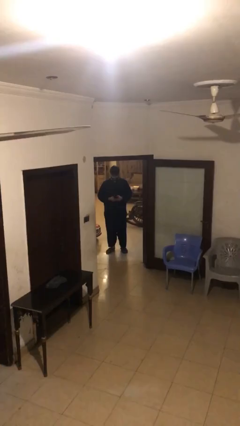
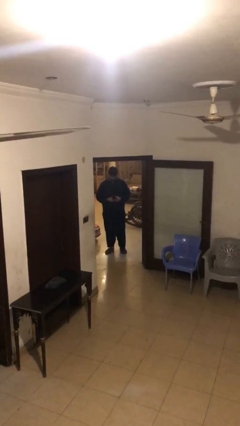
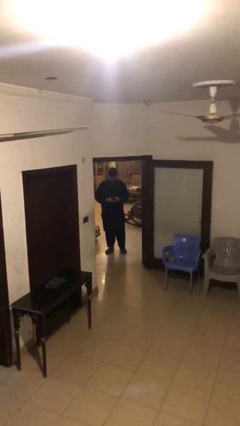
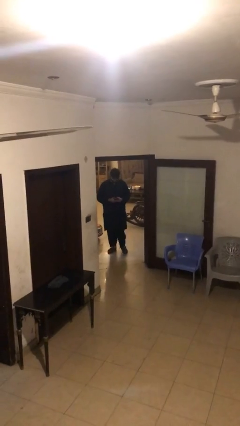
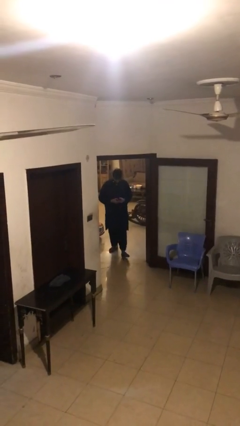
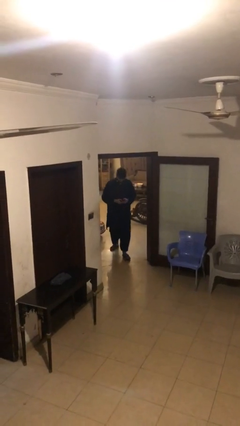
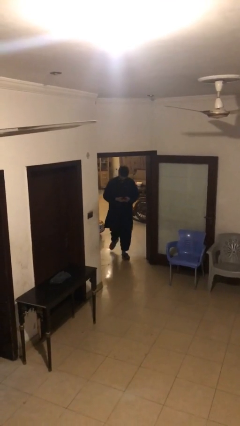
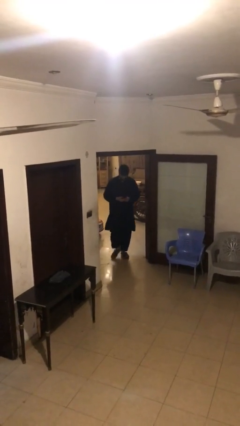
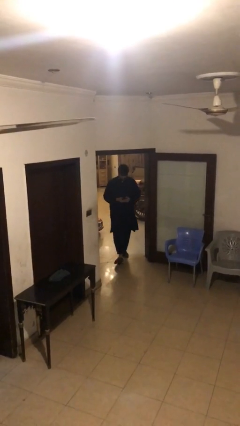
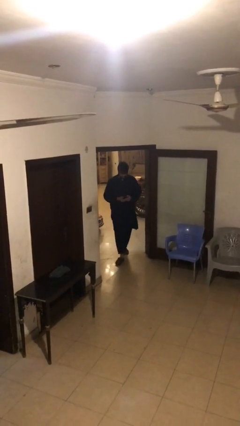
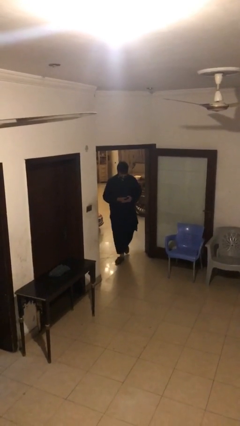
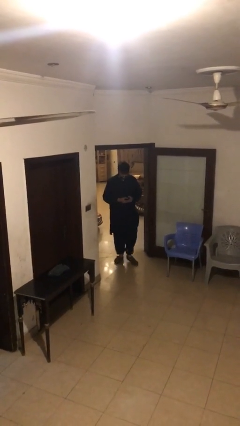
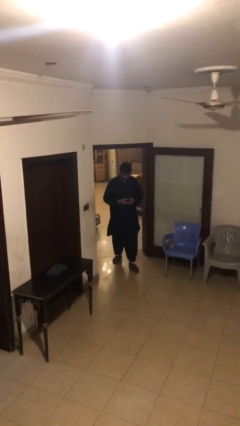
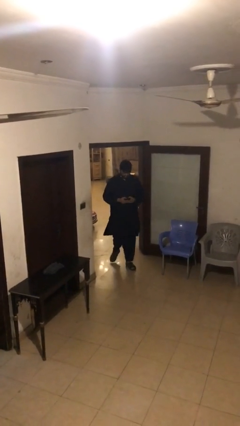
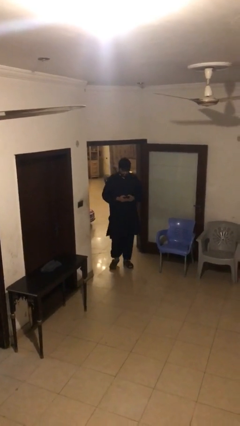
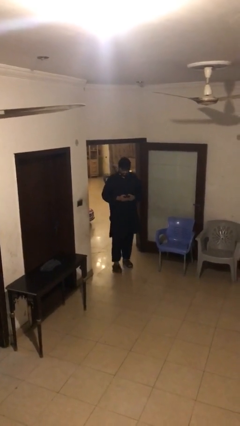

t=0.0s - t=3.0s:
person enters scene through structure

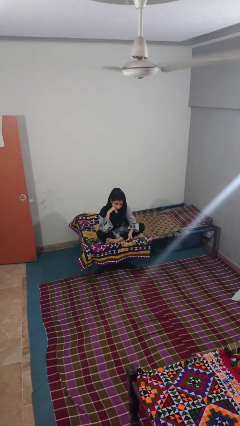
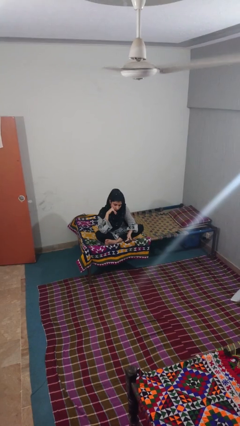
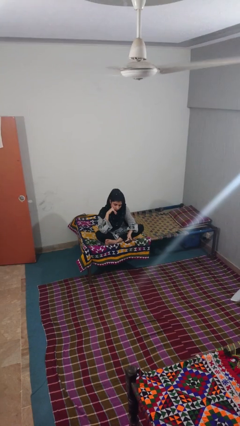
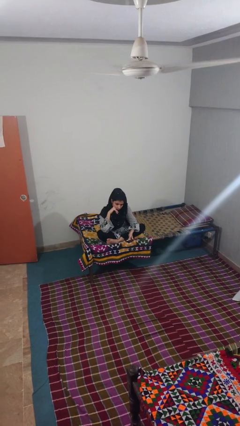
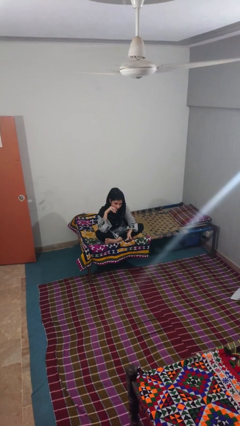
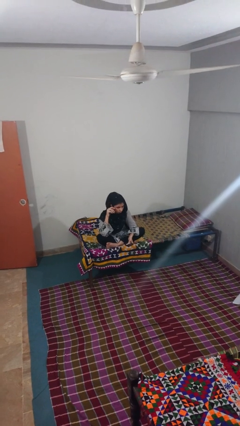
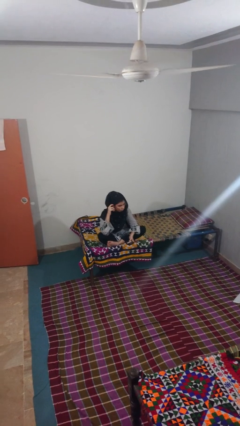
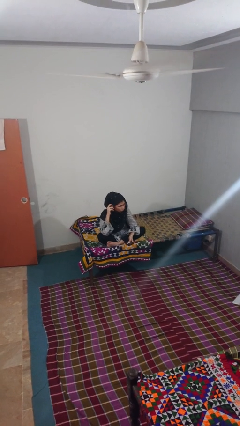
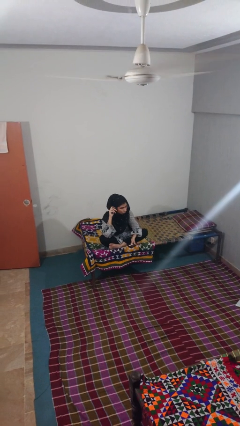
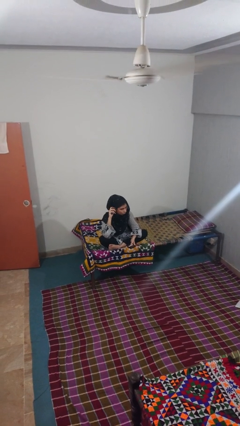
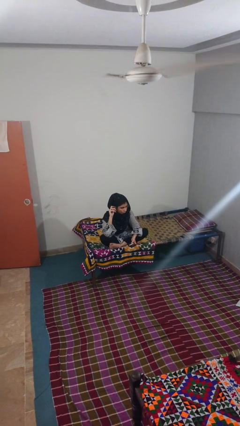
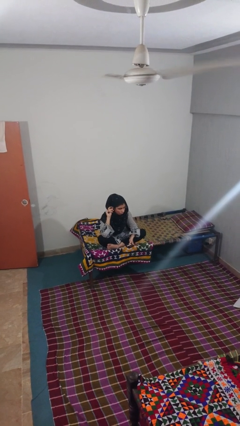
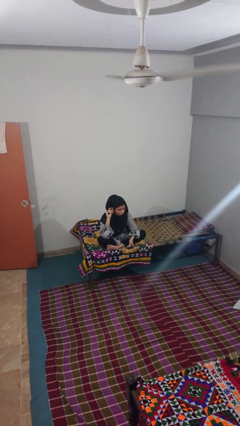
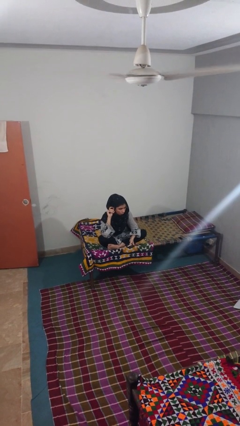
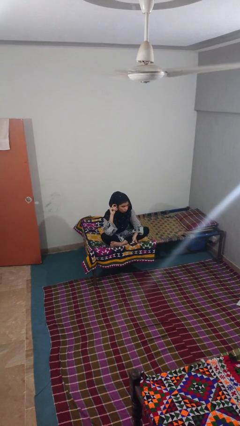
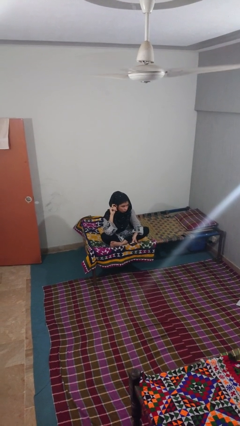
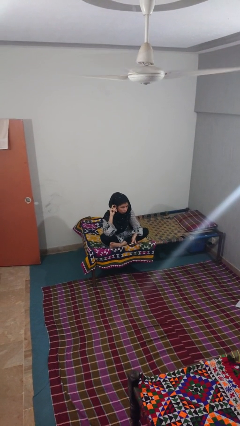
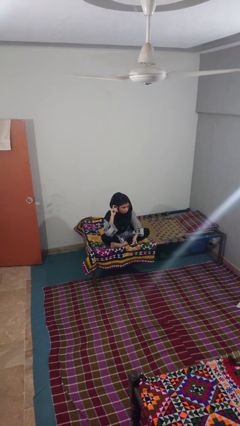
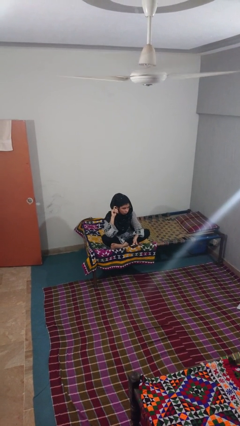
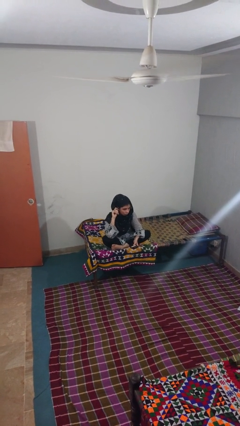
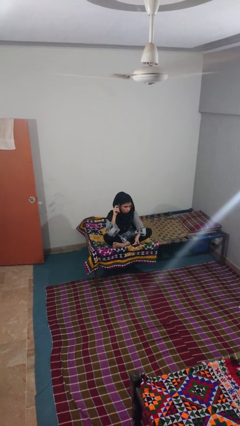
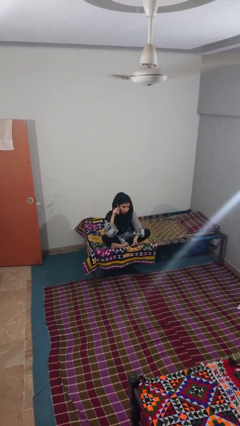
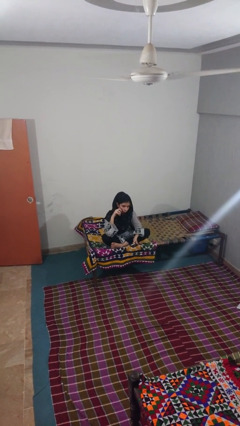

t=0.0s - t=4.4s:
person touches earlobe

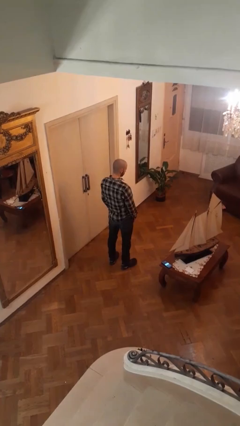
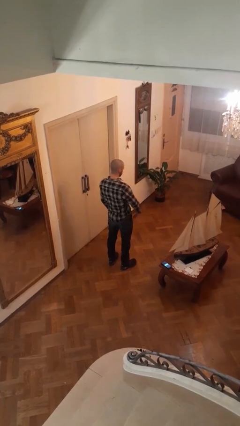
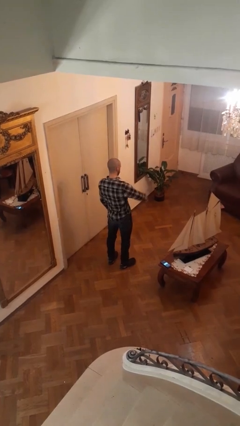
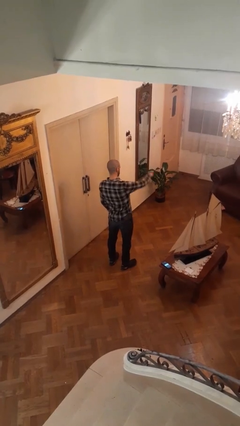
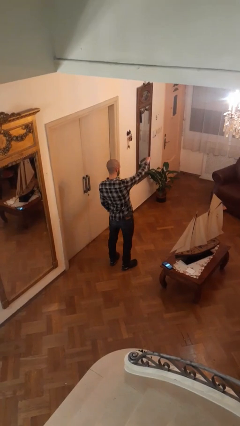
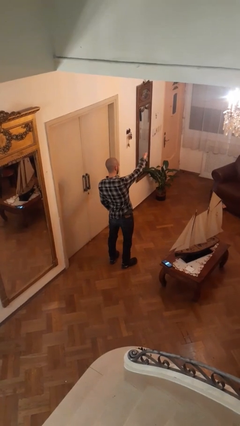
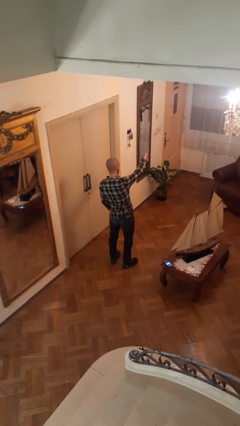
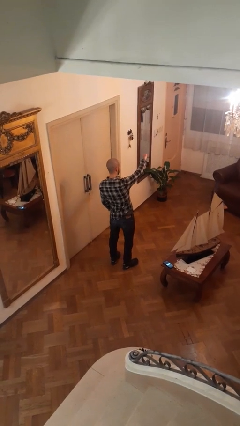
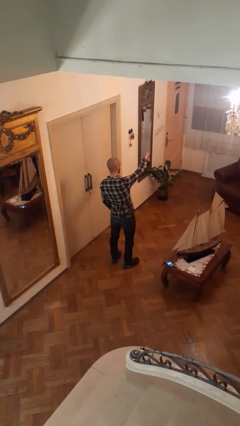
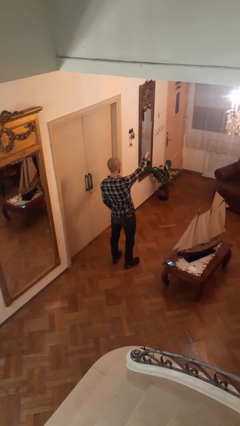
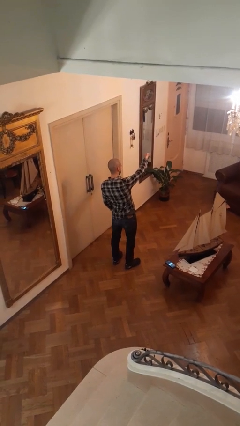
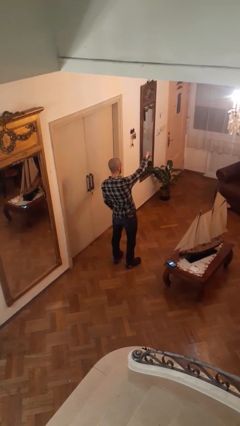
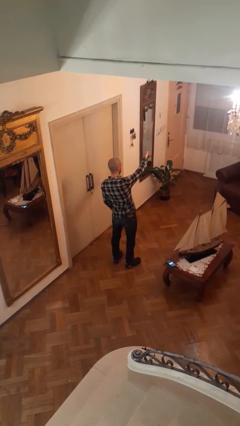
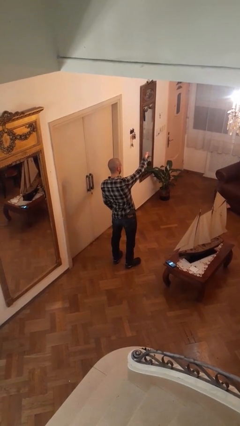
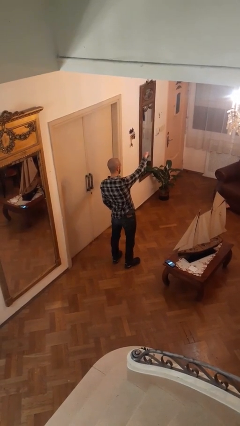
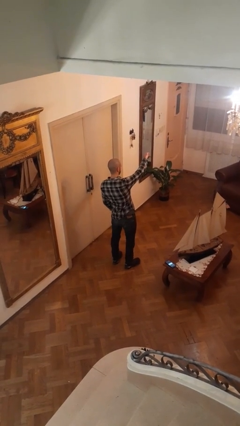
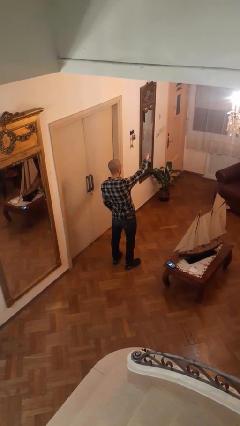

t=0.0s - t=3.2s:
person gestures thumbs down

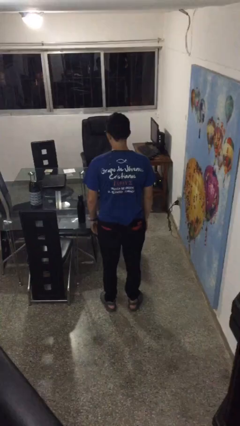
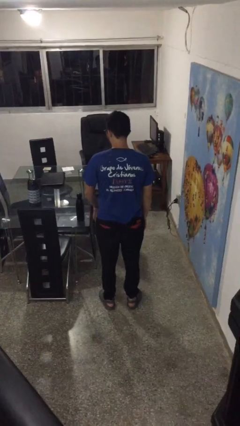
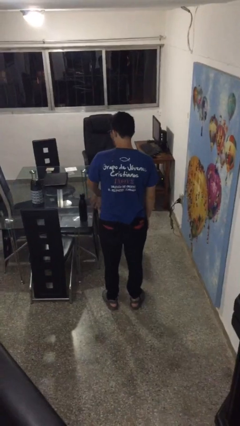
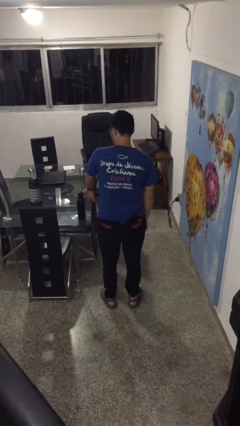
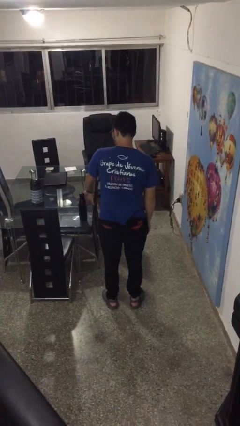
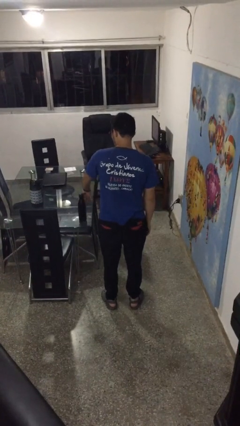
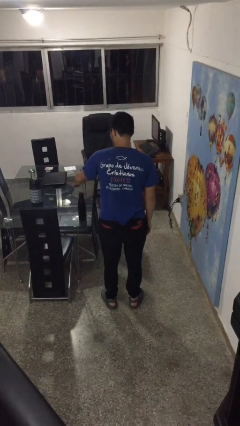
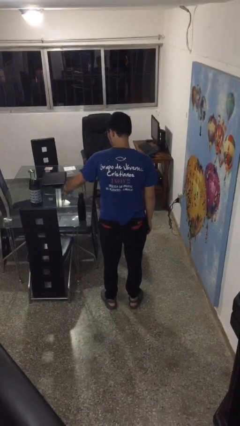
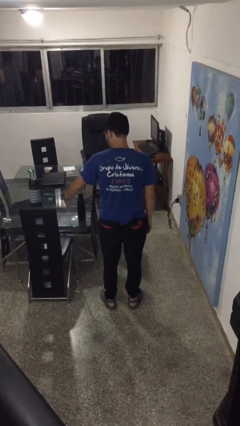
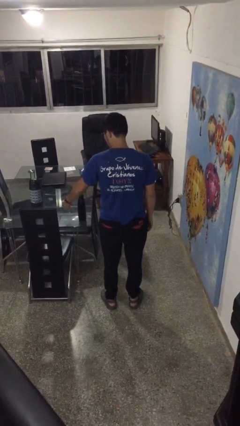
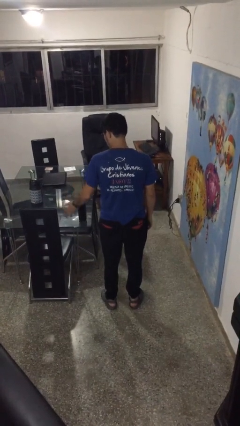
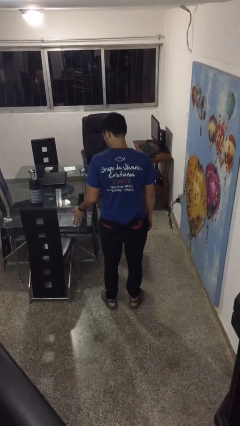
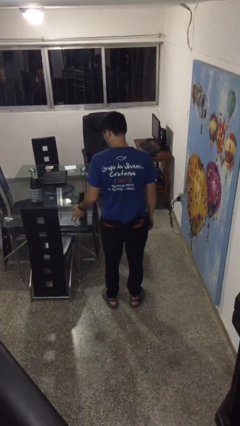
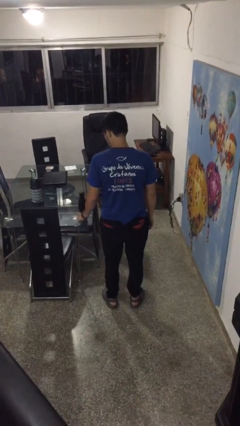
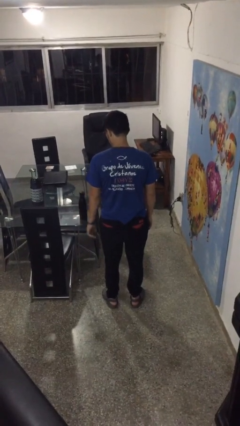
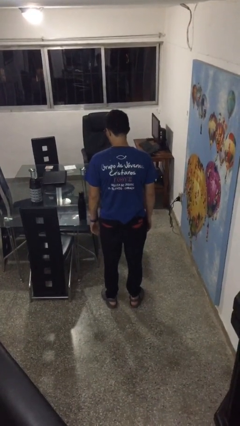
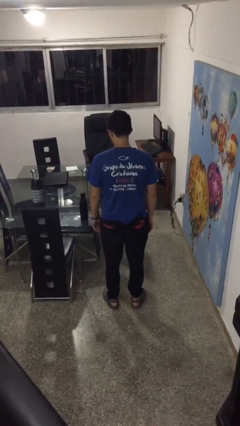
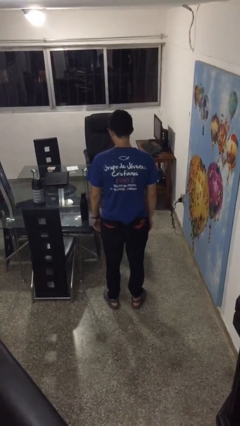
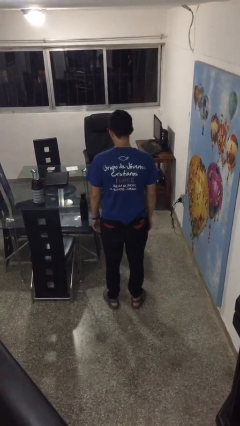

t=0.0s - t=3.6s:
person waves hand over object

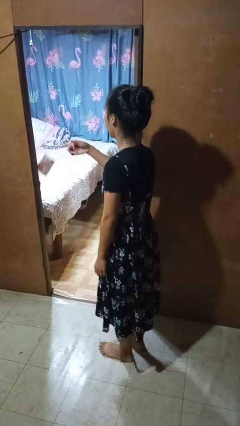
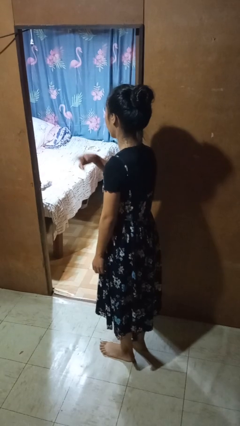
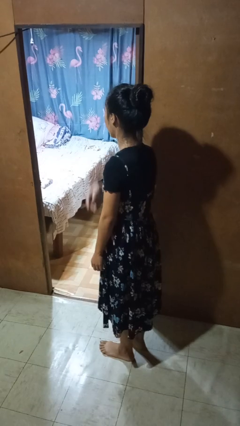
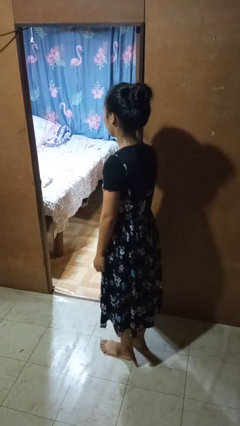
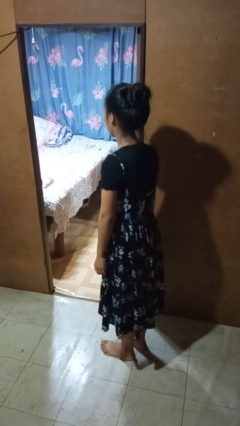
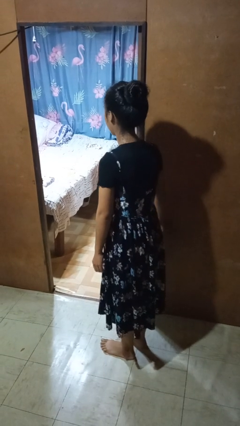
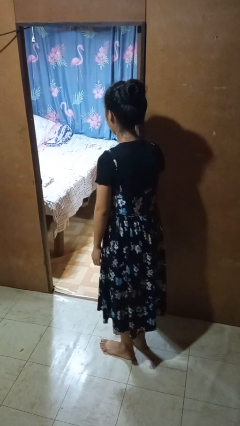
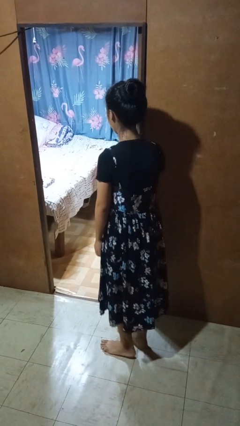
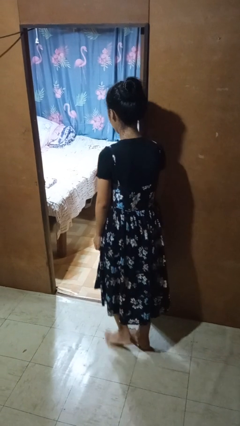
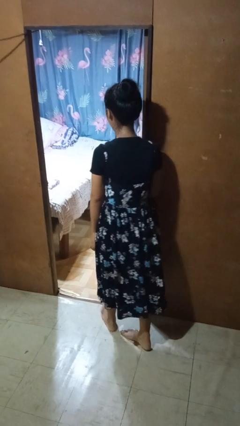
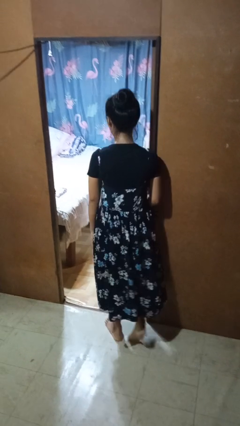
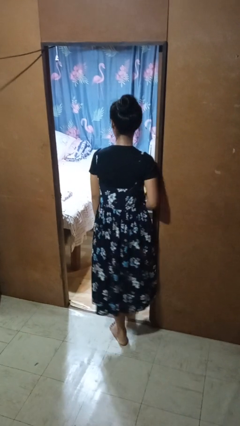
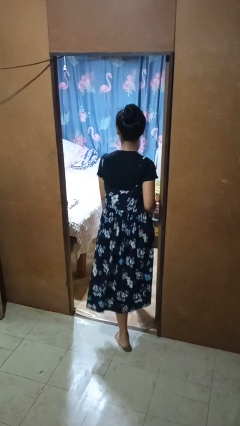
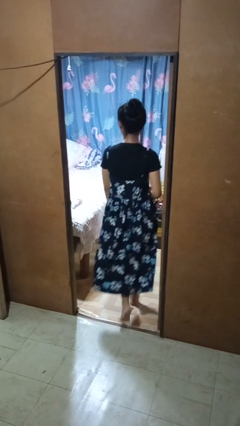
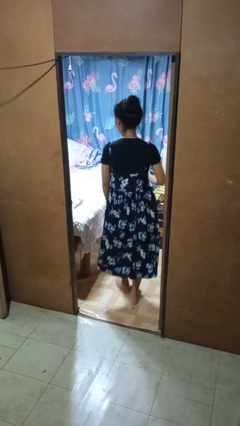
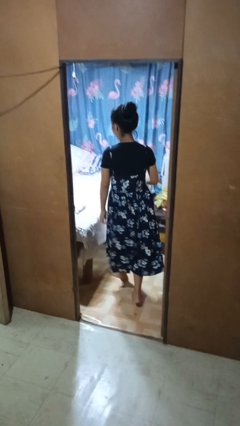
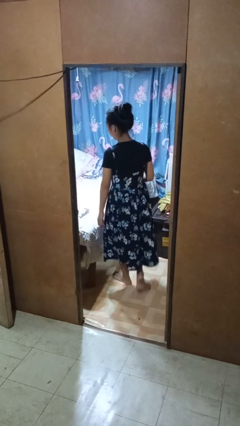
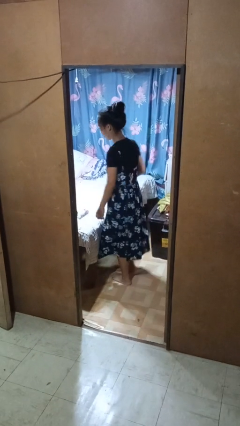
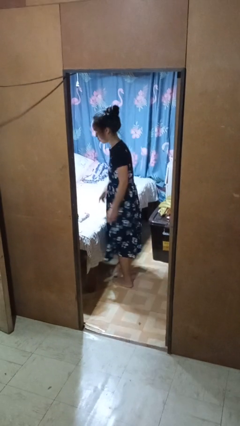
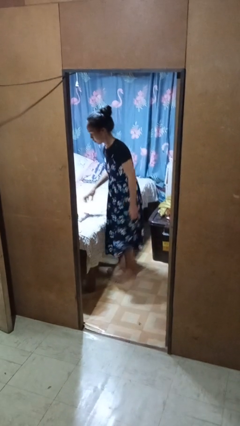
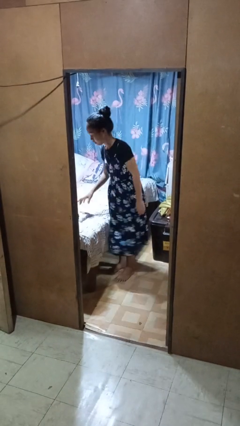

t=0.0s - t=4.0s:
person throws object on bed
